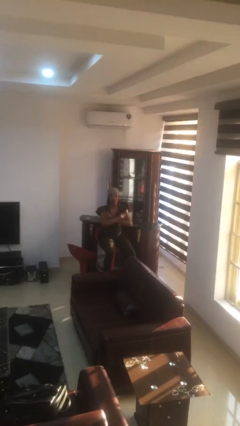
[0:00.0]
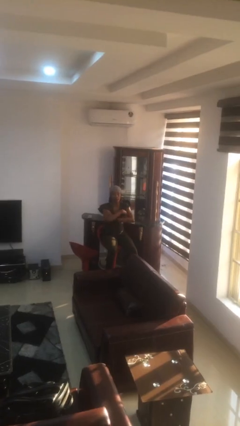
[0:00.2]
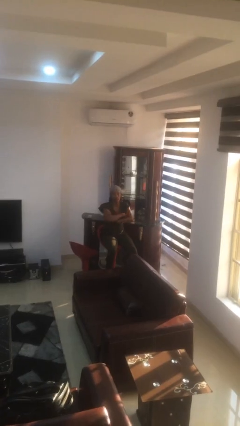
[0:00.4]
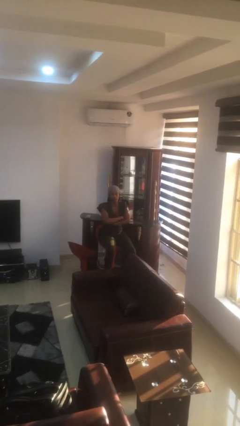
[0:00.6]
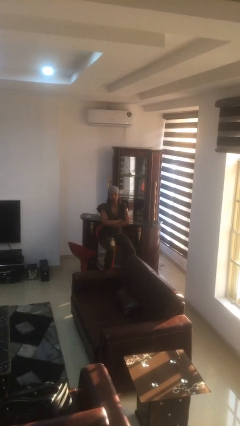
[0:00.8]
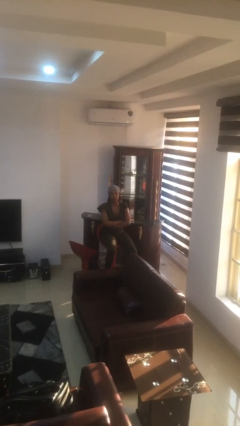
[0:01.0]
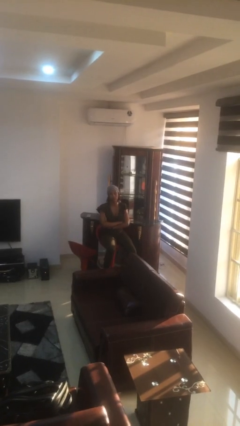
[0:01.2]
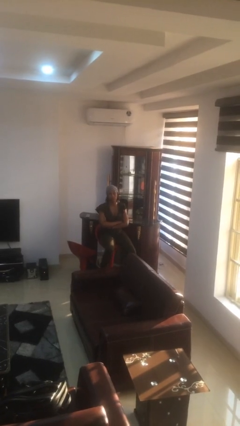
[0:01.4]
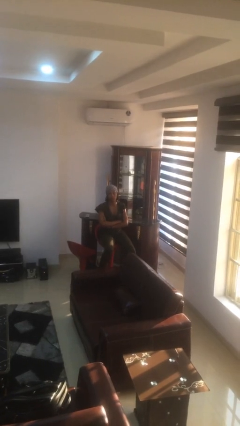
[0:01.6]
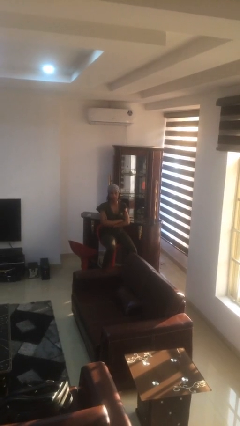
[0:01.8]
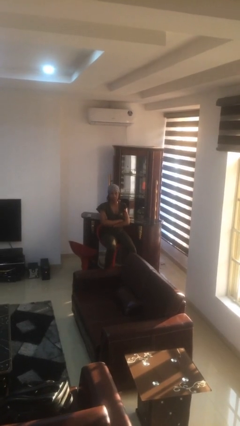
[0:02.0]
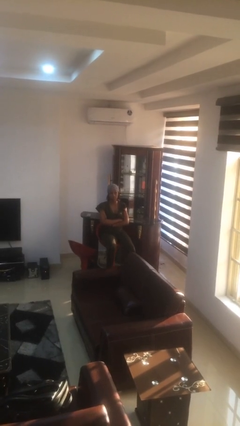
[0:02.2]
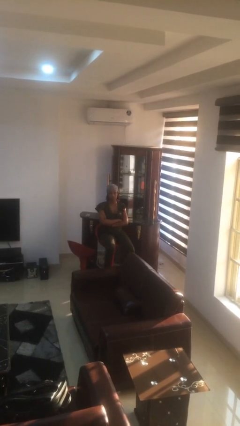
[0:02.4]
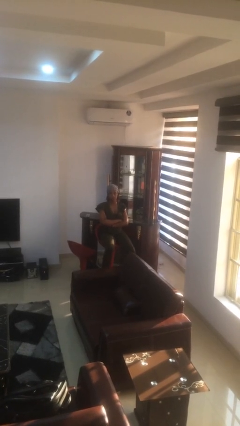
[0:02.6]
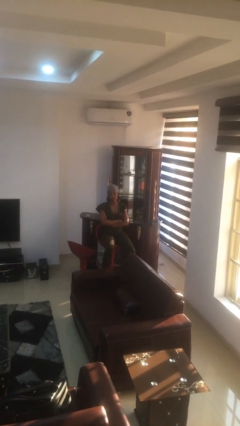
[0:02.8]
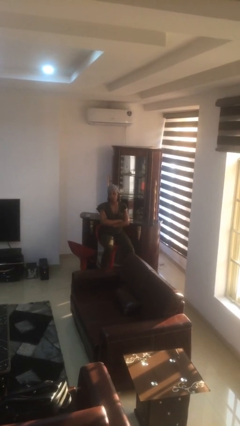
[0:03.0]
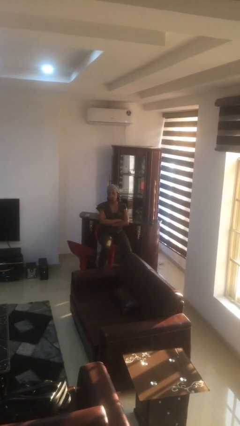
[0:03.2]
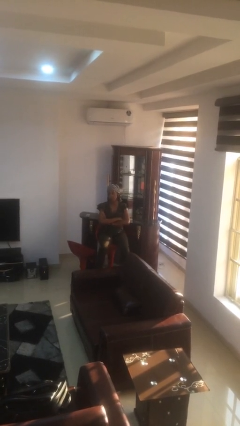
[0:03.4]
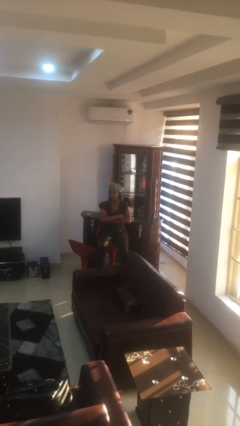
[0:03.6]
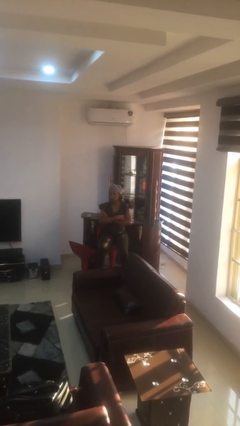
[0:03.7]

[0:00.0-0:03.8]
person crosses arms

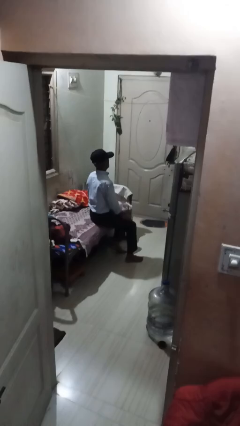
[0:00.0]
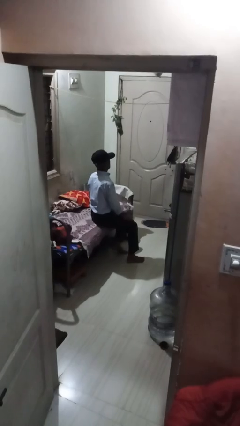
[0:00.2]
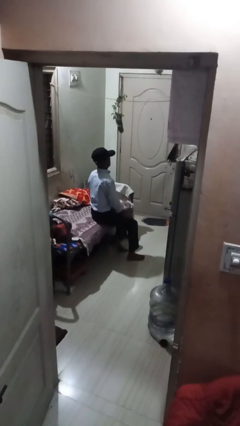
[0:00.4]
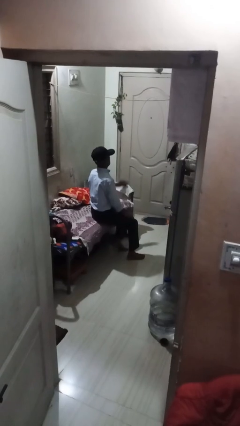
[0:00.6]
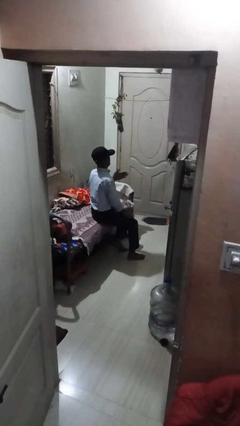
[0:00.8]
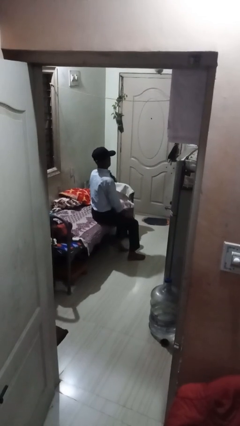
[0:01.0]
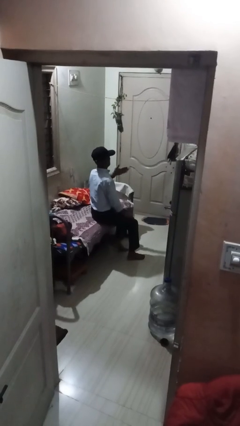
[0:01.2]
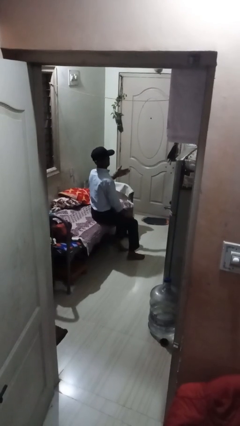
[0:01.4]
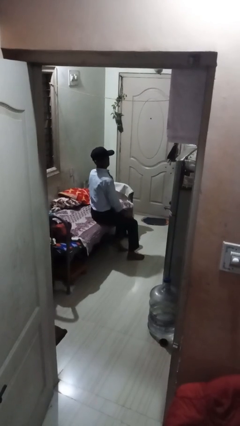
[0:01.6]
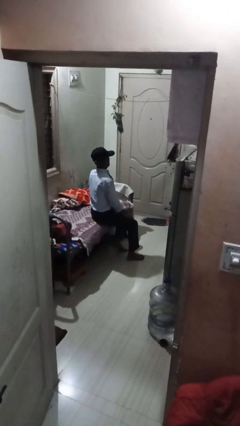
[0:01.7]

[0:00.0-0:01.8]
person drums on chest

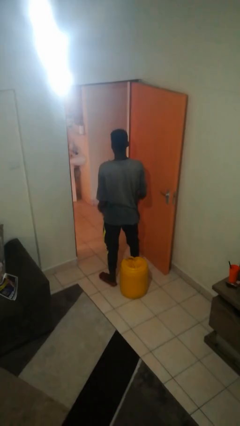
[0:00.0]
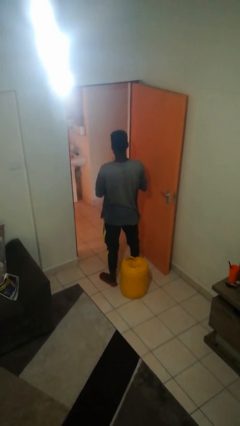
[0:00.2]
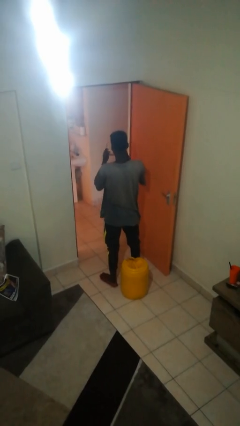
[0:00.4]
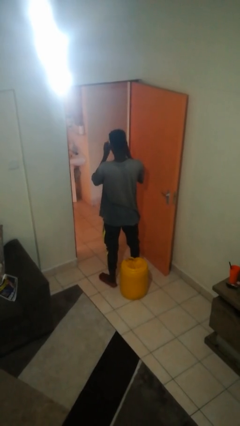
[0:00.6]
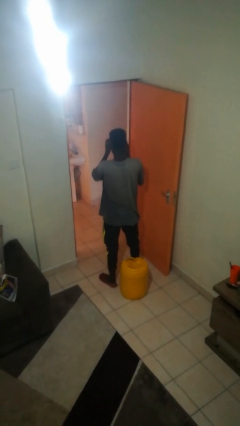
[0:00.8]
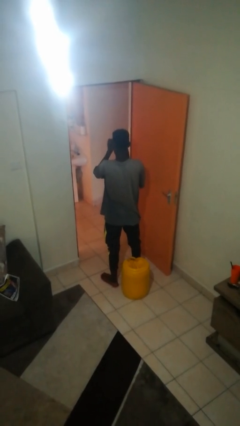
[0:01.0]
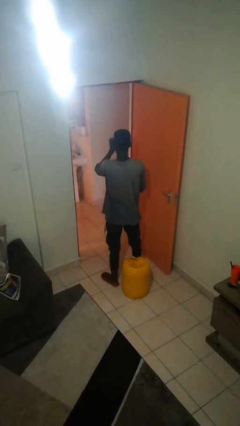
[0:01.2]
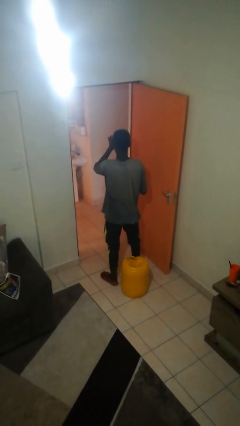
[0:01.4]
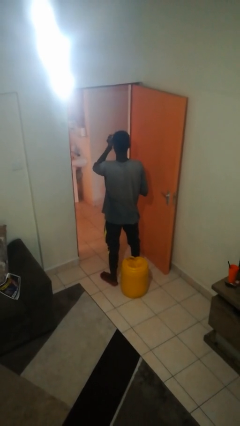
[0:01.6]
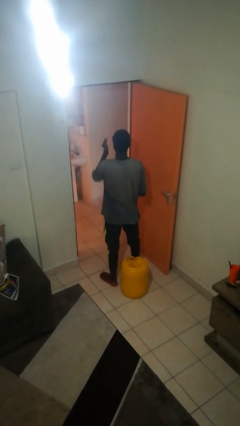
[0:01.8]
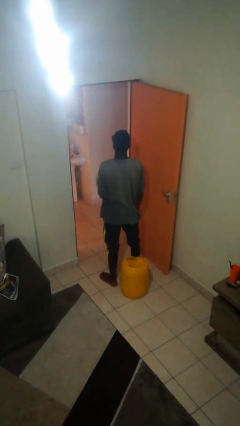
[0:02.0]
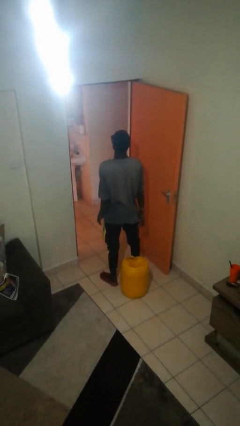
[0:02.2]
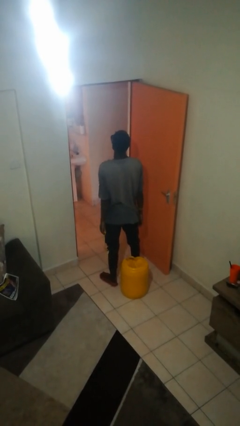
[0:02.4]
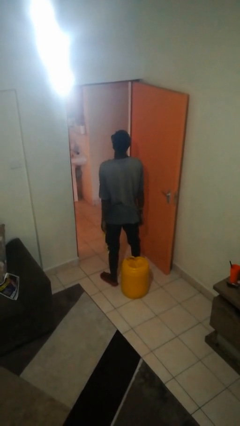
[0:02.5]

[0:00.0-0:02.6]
person puts on sunglasses

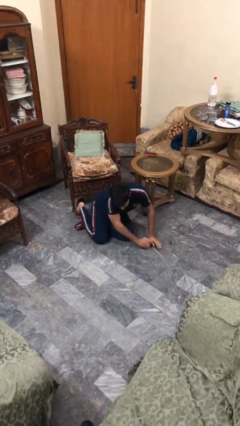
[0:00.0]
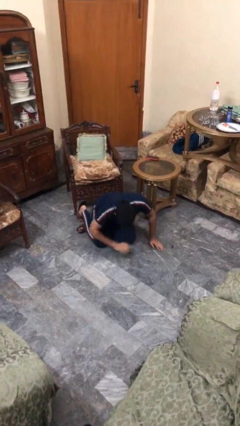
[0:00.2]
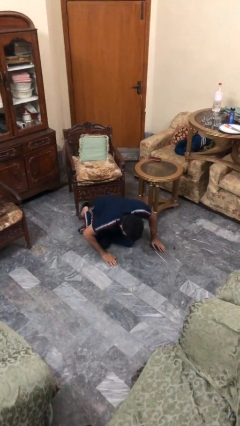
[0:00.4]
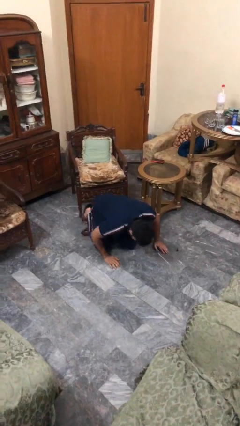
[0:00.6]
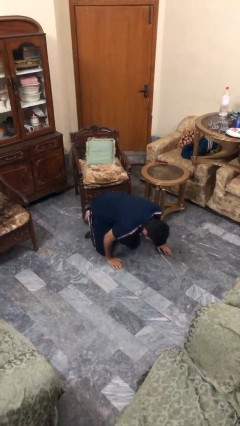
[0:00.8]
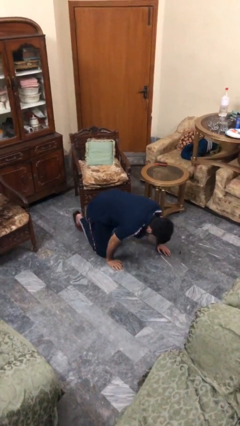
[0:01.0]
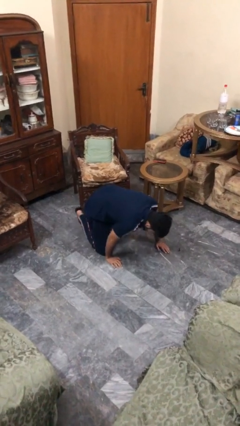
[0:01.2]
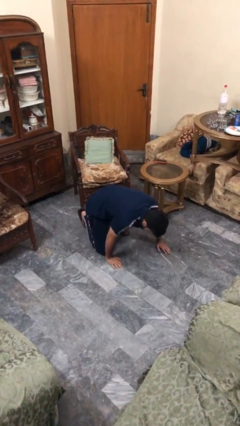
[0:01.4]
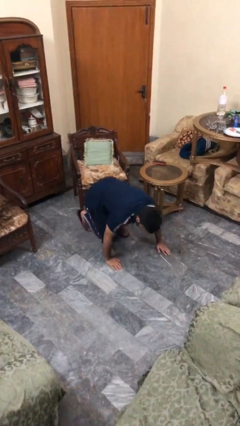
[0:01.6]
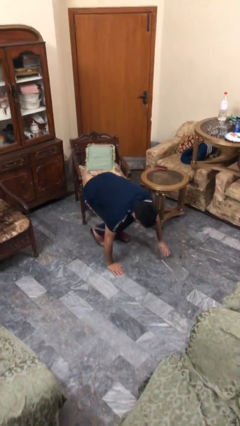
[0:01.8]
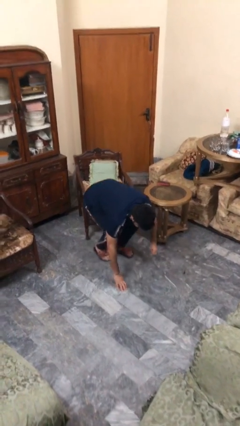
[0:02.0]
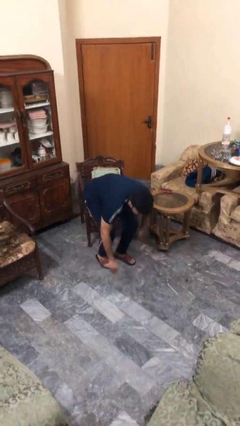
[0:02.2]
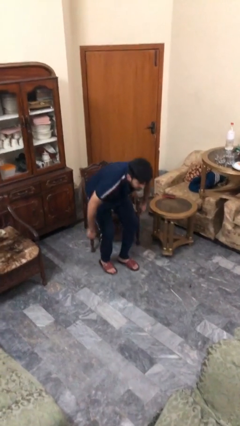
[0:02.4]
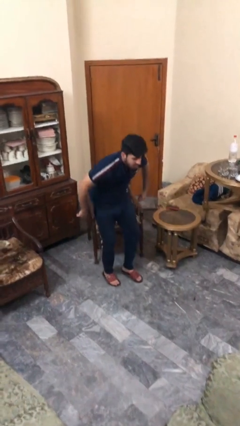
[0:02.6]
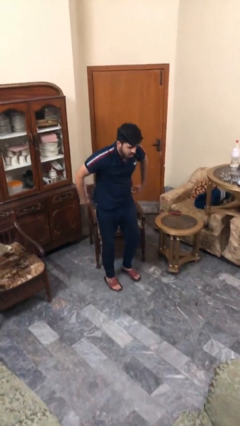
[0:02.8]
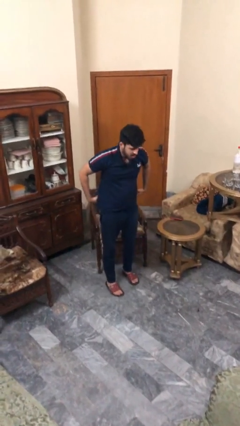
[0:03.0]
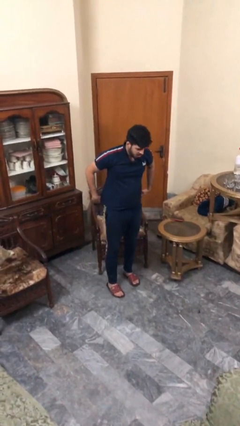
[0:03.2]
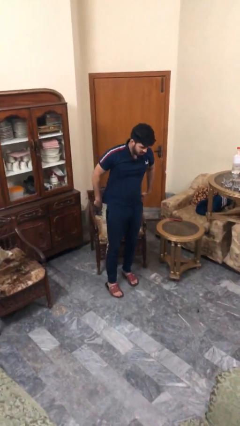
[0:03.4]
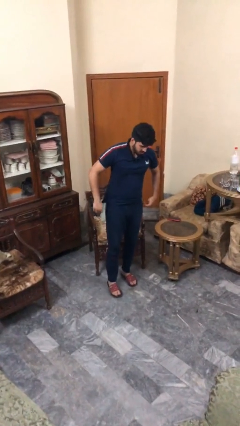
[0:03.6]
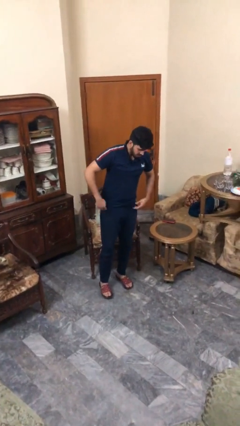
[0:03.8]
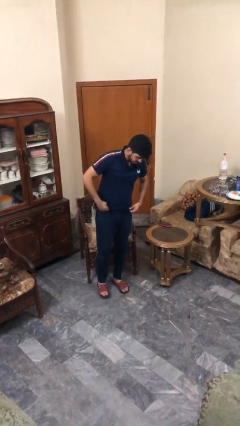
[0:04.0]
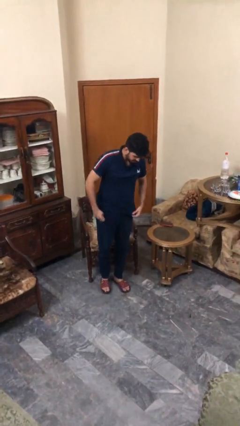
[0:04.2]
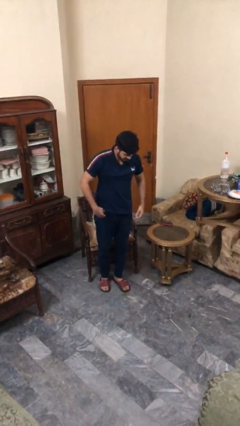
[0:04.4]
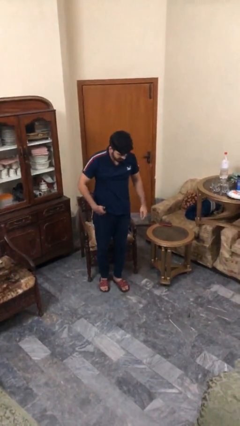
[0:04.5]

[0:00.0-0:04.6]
person stands up from floor

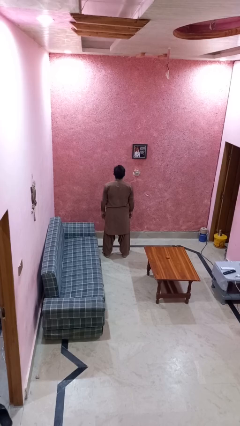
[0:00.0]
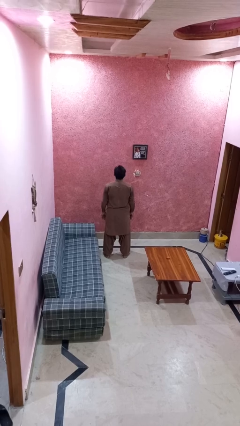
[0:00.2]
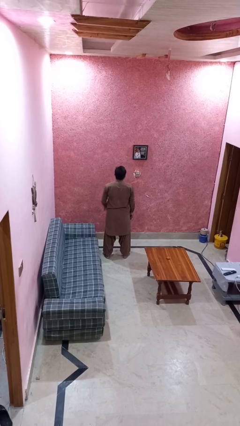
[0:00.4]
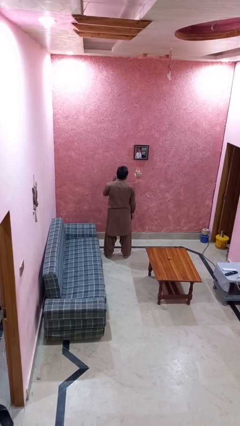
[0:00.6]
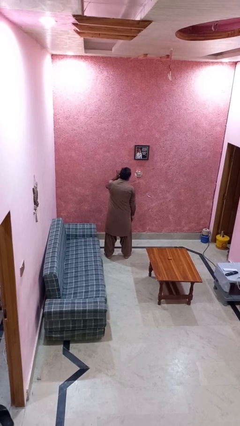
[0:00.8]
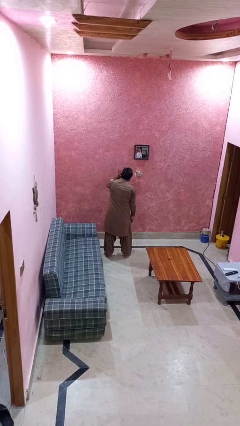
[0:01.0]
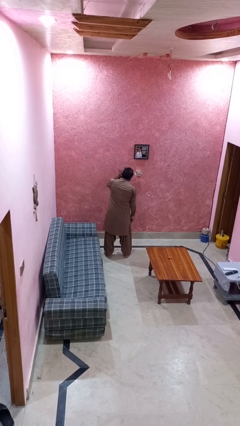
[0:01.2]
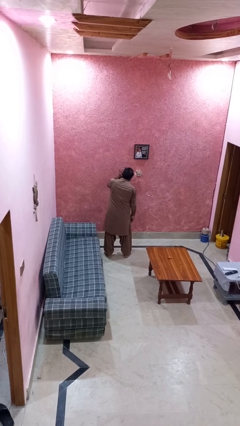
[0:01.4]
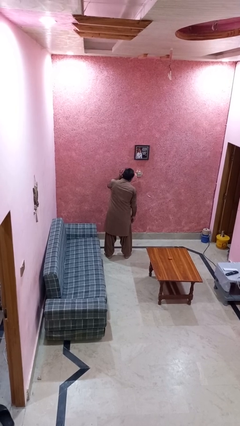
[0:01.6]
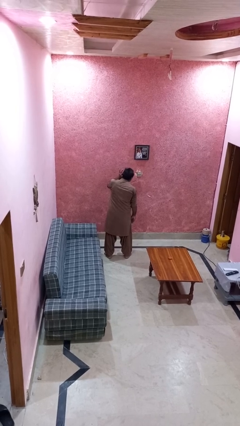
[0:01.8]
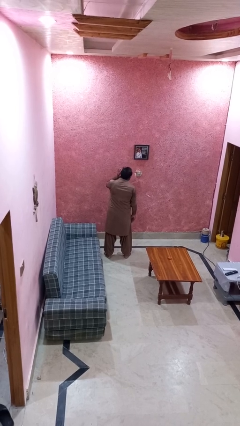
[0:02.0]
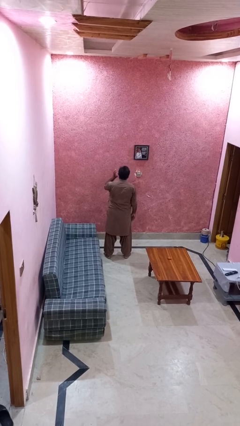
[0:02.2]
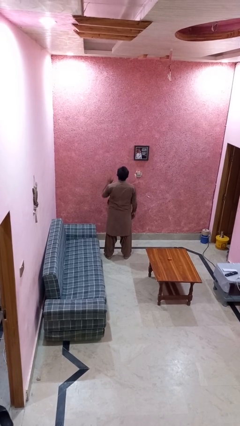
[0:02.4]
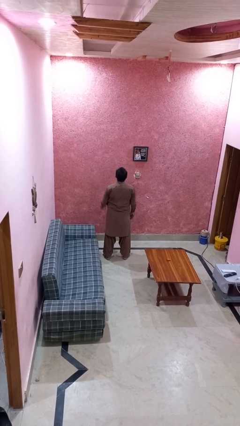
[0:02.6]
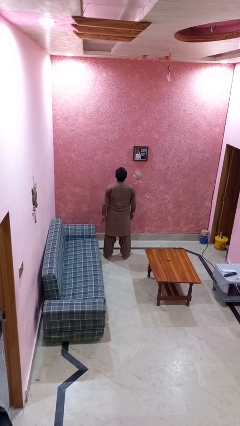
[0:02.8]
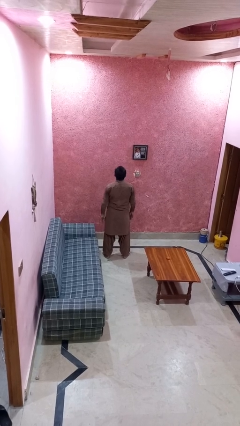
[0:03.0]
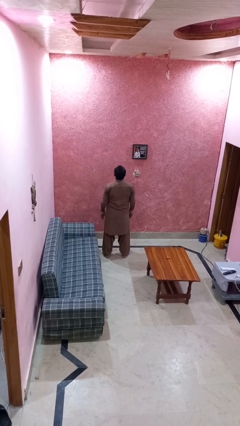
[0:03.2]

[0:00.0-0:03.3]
person gestures listen closely

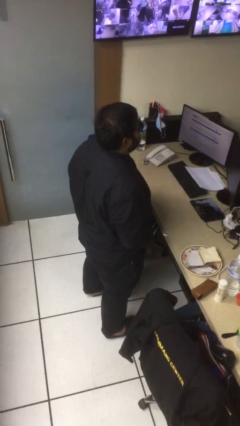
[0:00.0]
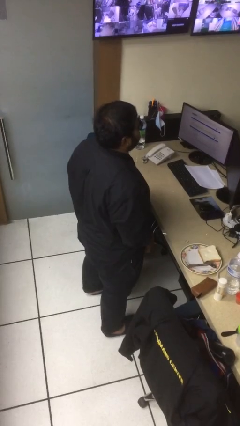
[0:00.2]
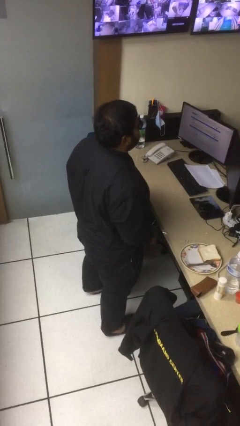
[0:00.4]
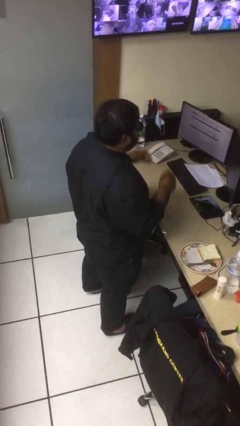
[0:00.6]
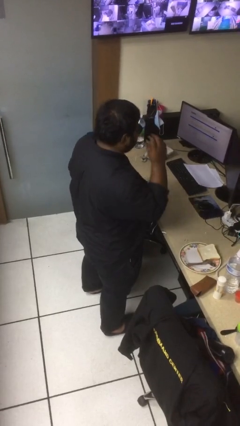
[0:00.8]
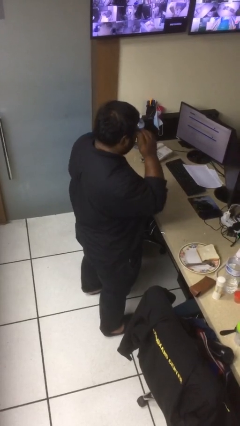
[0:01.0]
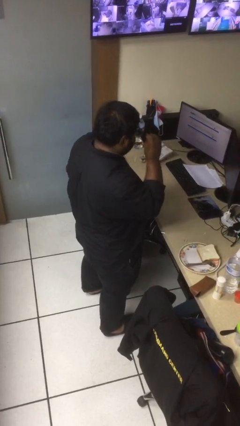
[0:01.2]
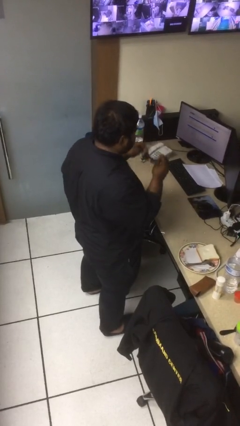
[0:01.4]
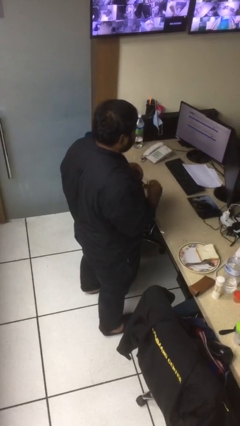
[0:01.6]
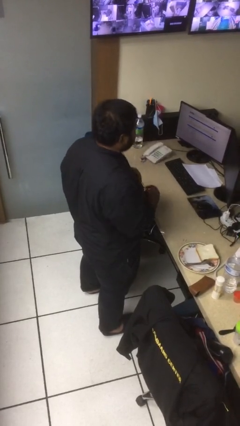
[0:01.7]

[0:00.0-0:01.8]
person takes off sunglasses
